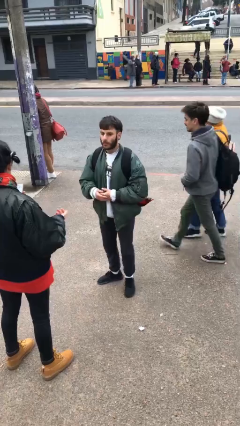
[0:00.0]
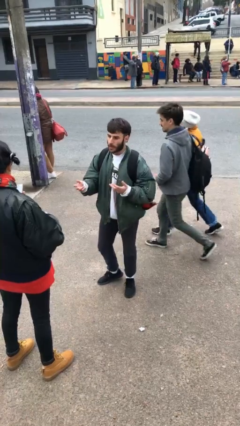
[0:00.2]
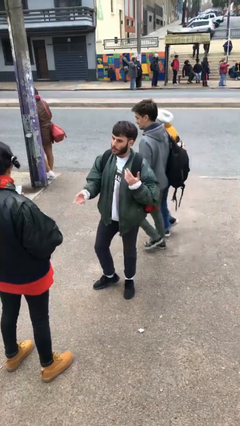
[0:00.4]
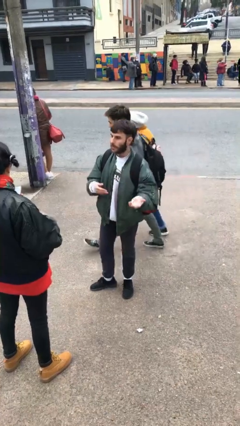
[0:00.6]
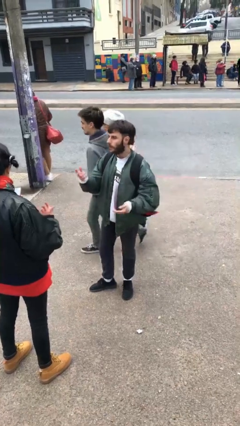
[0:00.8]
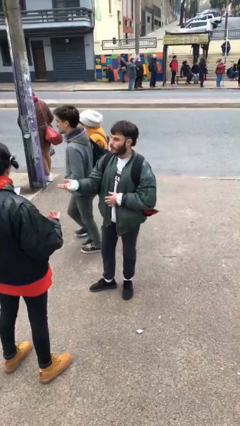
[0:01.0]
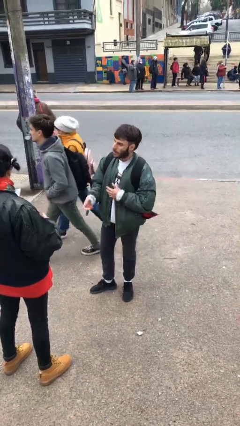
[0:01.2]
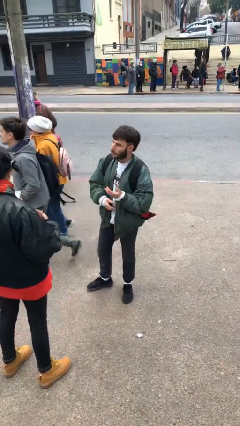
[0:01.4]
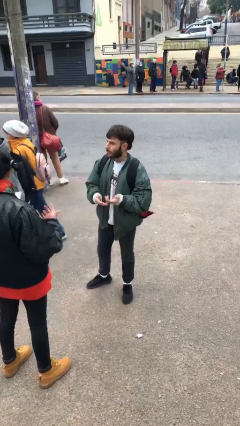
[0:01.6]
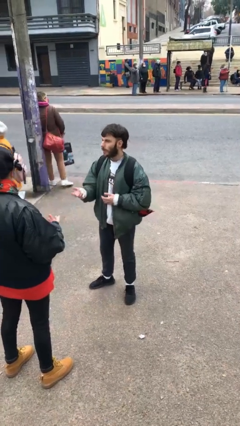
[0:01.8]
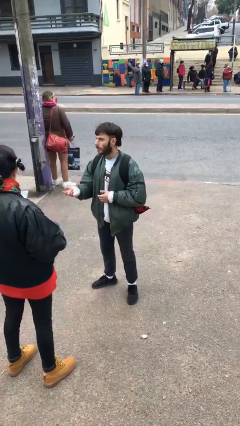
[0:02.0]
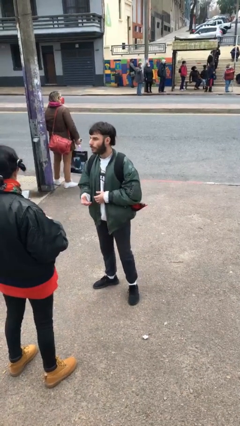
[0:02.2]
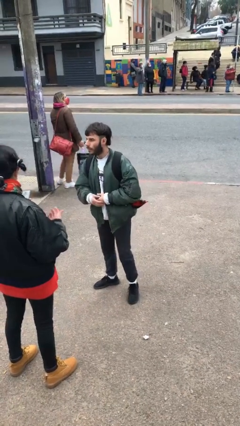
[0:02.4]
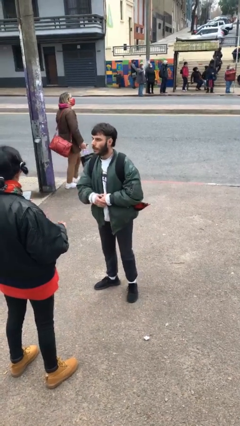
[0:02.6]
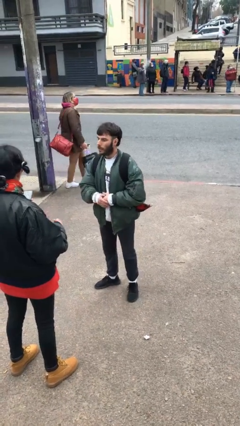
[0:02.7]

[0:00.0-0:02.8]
person talks to person

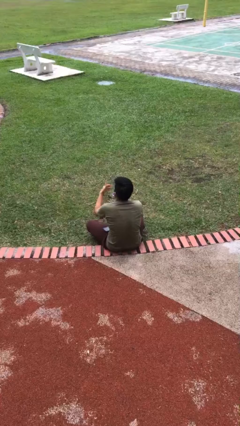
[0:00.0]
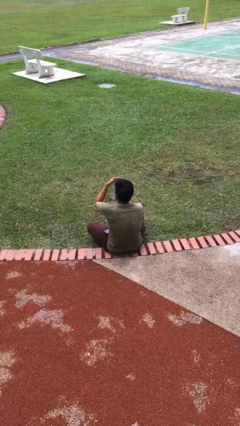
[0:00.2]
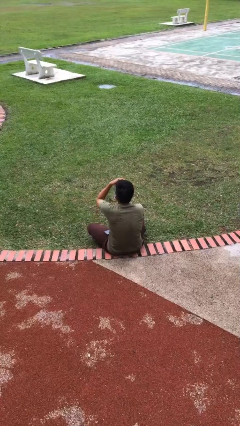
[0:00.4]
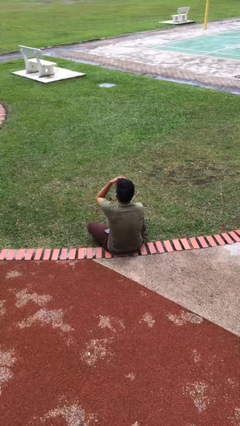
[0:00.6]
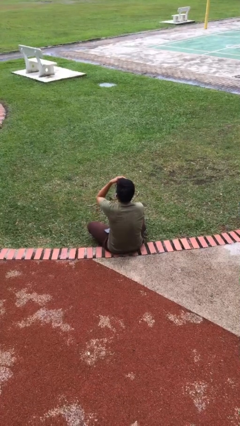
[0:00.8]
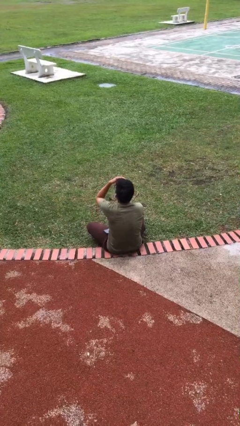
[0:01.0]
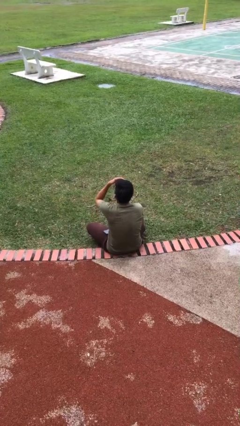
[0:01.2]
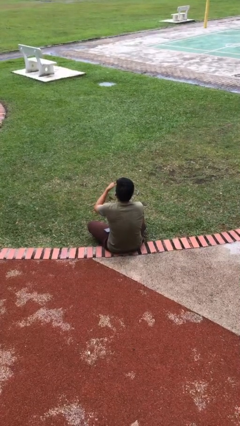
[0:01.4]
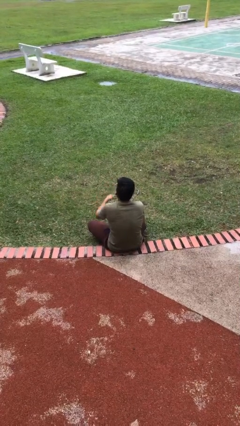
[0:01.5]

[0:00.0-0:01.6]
person shades eyes

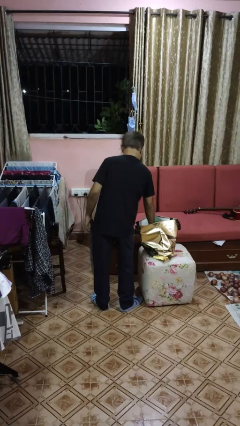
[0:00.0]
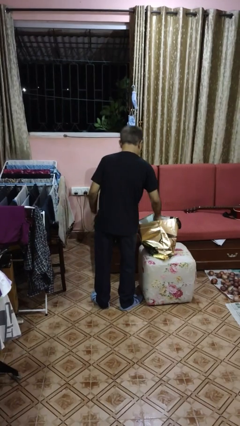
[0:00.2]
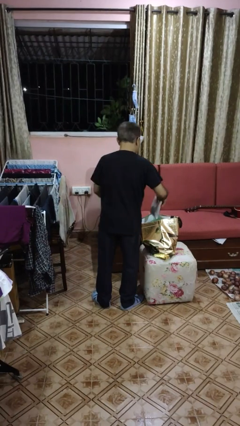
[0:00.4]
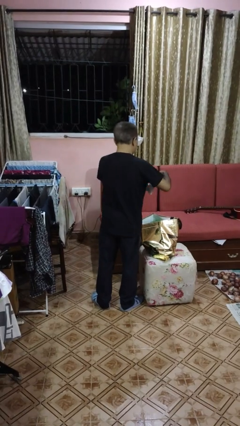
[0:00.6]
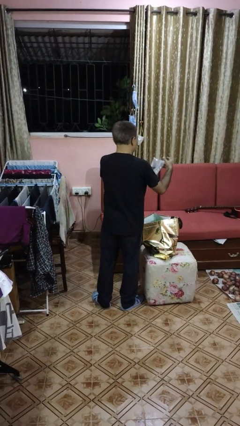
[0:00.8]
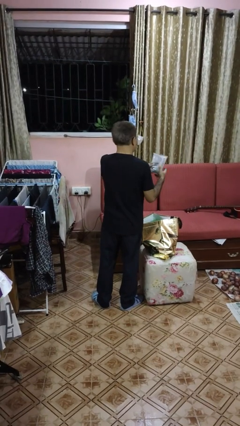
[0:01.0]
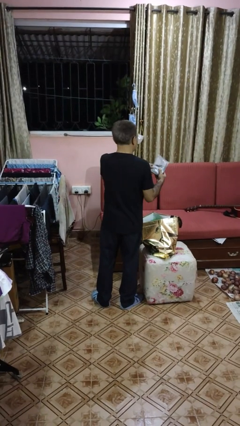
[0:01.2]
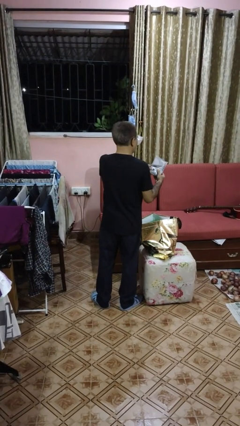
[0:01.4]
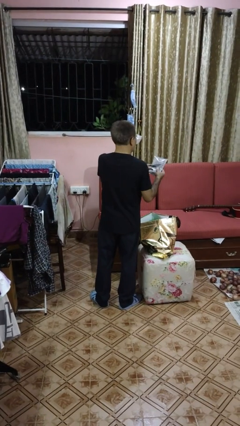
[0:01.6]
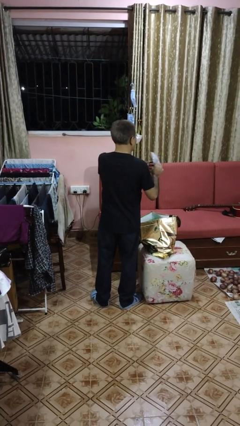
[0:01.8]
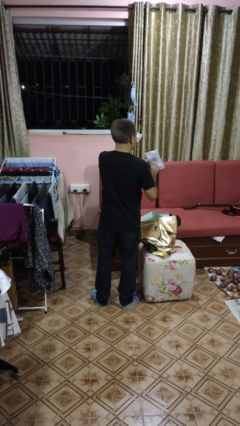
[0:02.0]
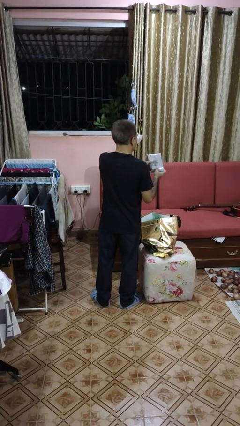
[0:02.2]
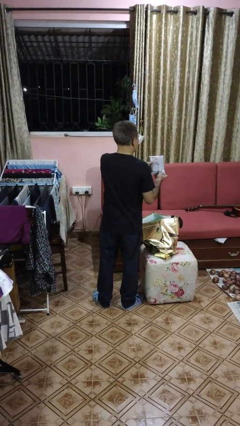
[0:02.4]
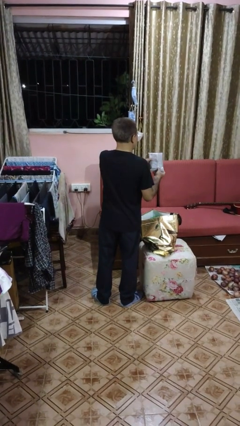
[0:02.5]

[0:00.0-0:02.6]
person takes object from bag

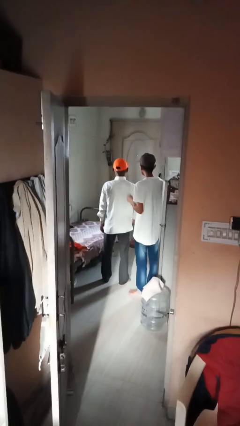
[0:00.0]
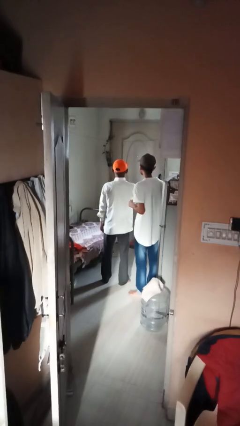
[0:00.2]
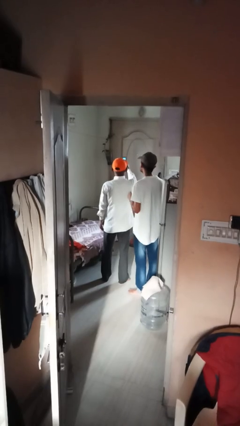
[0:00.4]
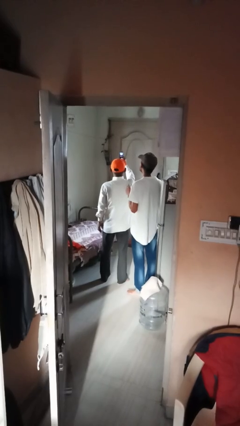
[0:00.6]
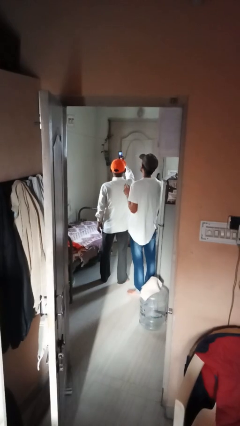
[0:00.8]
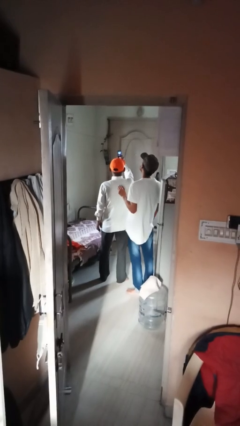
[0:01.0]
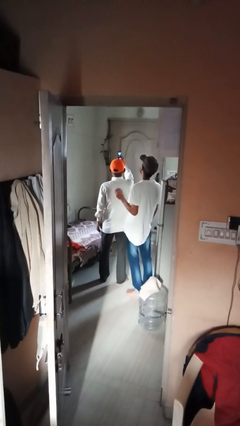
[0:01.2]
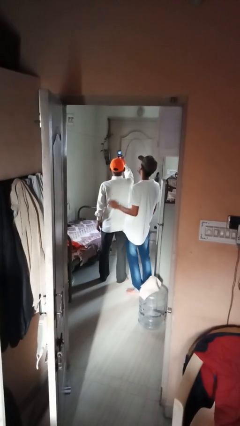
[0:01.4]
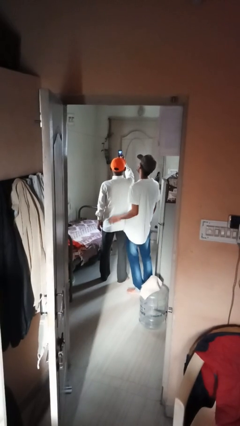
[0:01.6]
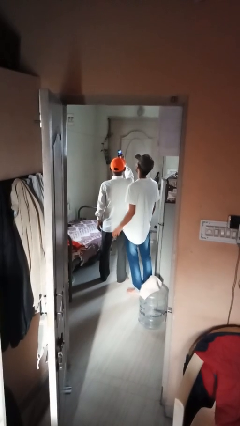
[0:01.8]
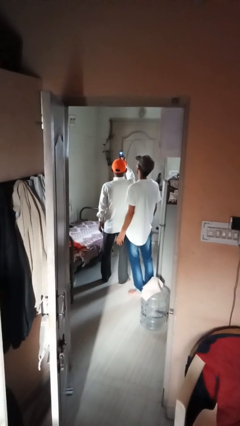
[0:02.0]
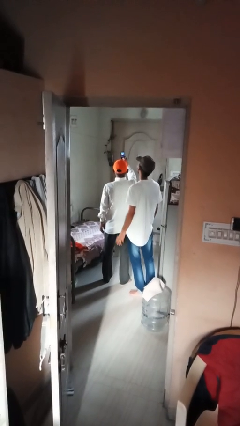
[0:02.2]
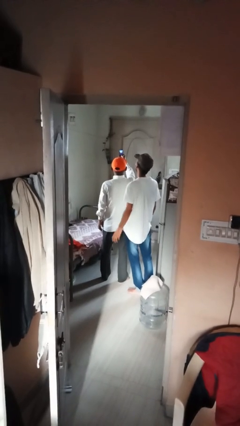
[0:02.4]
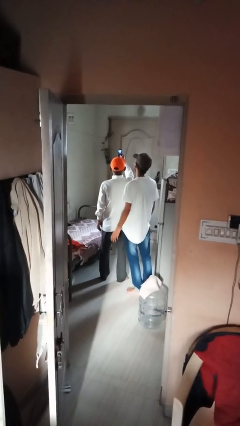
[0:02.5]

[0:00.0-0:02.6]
person takes selfie with person

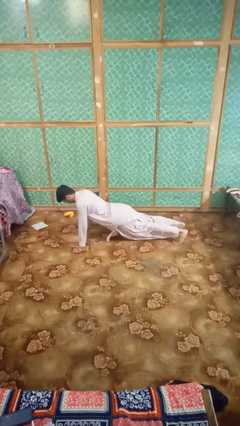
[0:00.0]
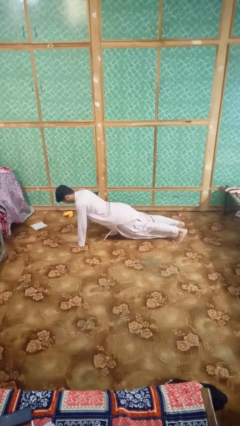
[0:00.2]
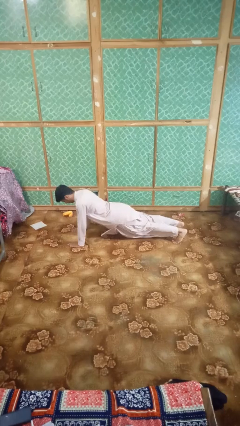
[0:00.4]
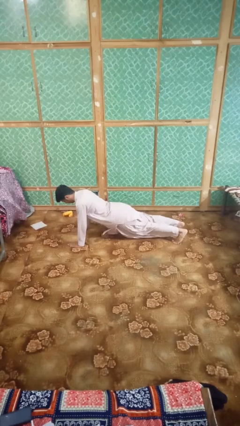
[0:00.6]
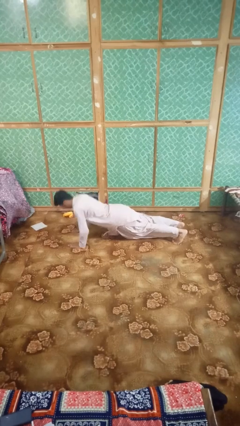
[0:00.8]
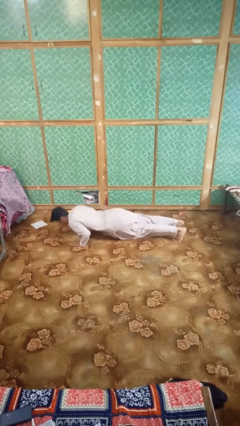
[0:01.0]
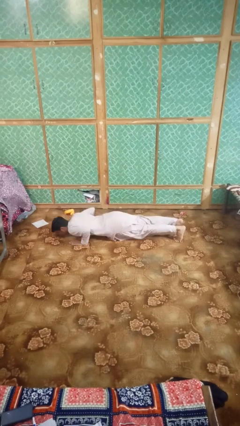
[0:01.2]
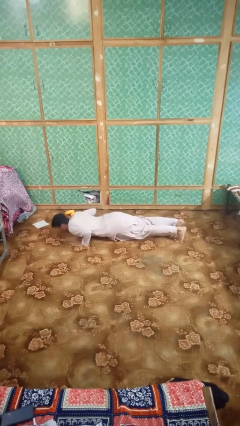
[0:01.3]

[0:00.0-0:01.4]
person exercises with pushup

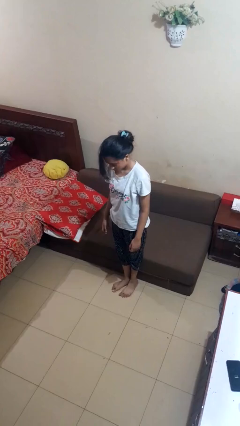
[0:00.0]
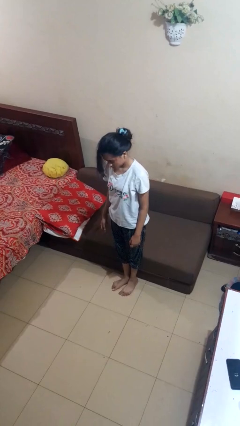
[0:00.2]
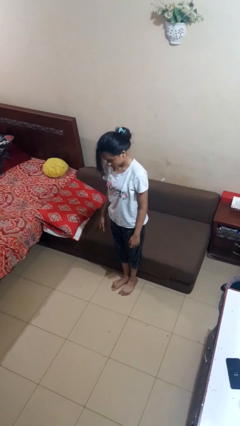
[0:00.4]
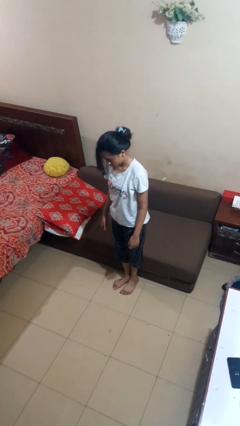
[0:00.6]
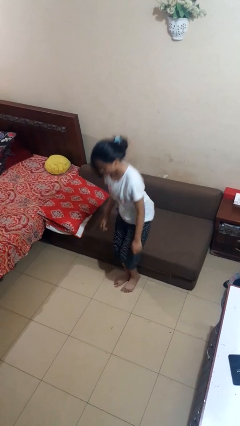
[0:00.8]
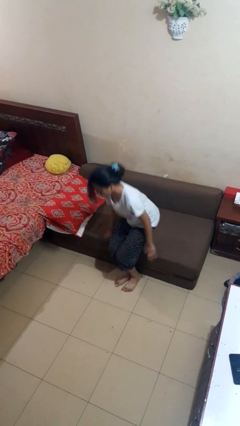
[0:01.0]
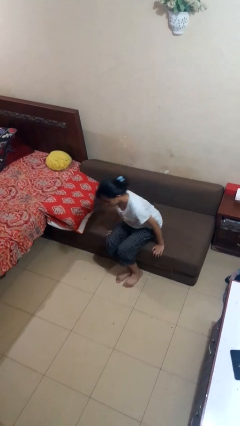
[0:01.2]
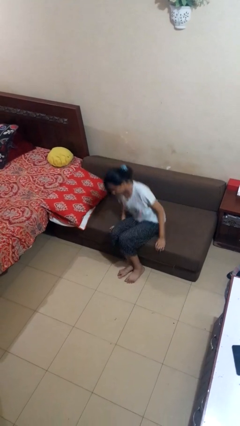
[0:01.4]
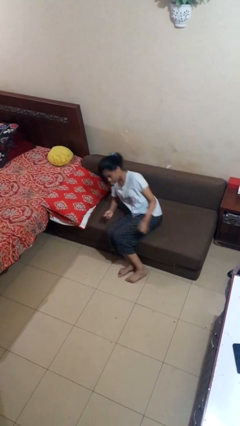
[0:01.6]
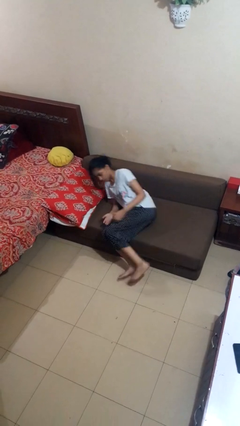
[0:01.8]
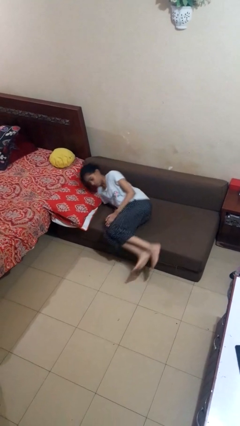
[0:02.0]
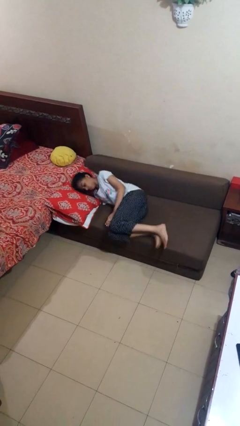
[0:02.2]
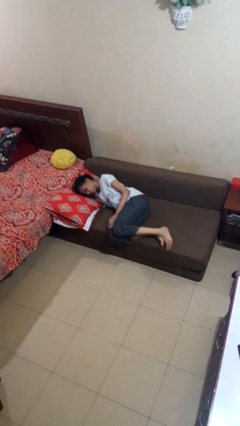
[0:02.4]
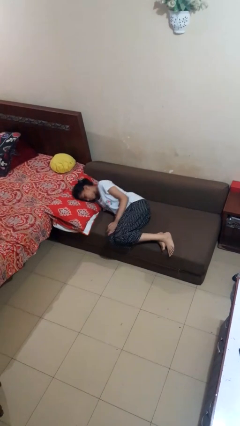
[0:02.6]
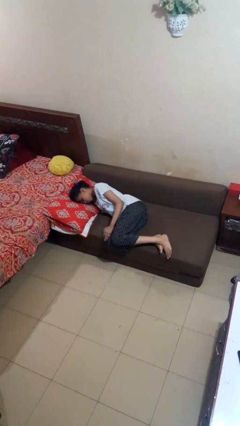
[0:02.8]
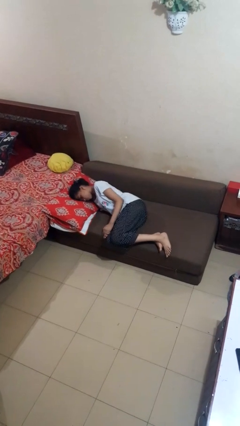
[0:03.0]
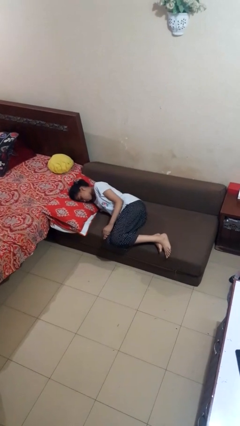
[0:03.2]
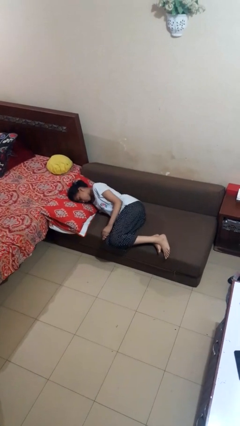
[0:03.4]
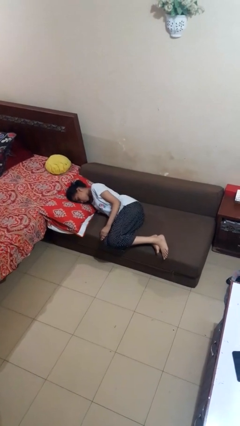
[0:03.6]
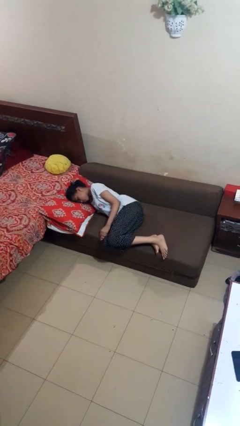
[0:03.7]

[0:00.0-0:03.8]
person lies down on couch

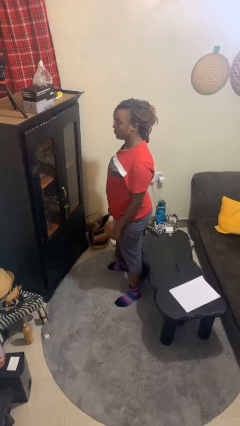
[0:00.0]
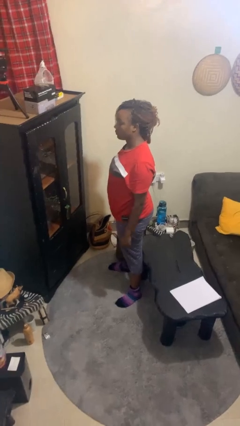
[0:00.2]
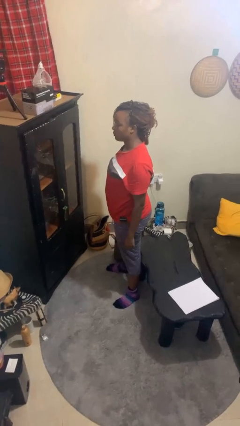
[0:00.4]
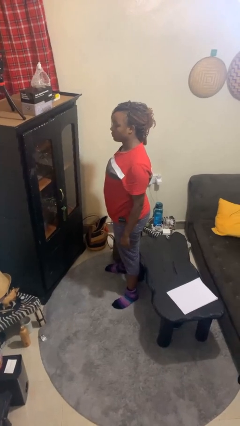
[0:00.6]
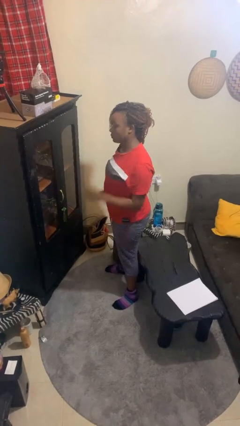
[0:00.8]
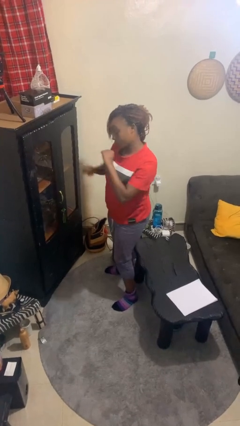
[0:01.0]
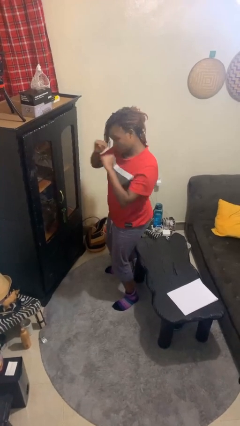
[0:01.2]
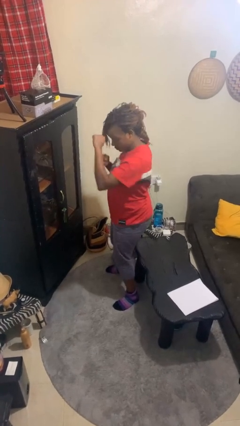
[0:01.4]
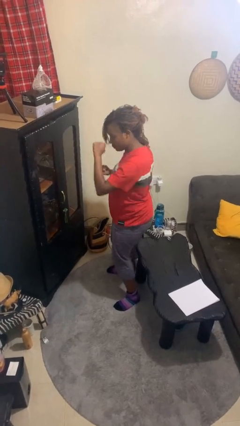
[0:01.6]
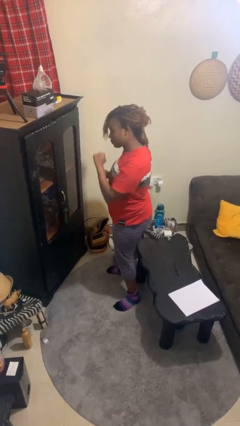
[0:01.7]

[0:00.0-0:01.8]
person punches

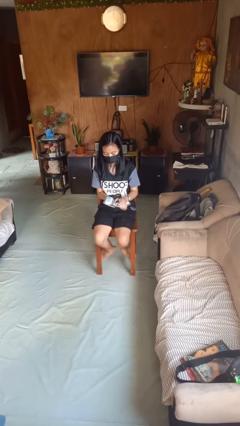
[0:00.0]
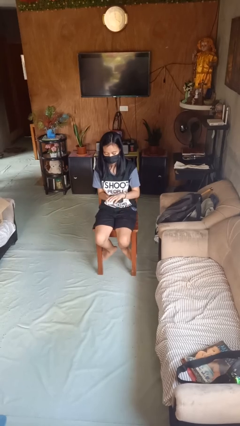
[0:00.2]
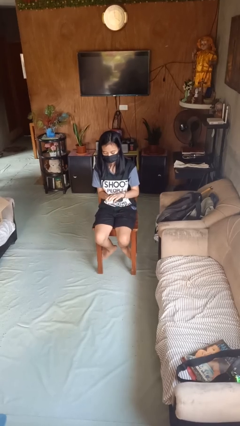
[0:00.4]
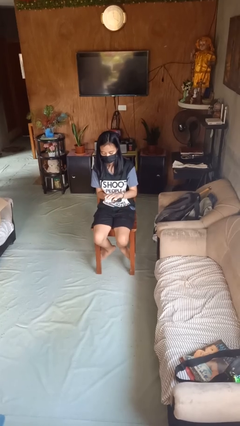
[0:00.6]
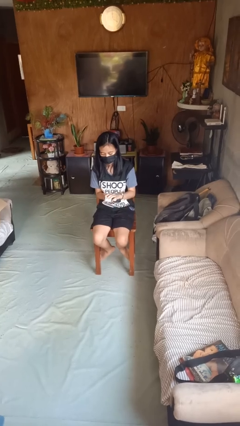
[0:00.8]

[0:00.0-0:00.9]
person opens jewelry box
